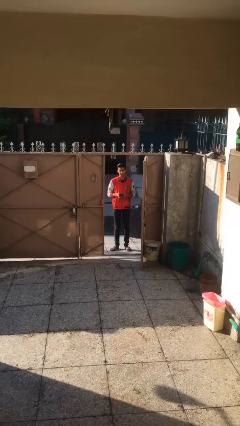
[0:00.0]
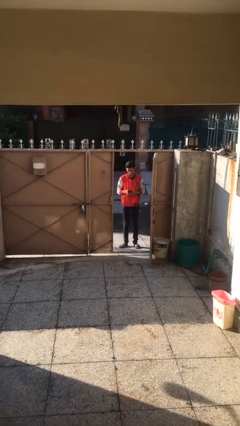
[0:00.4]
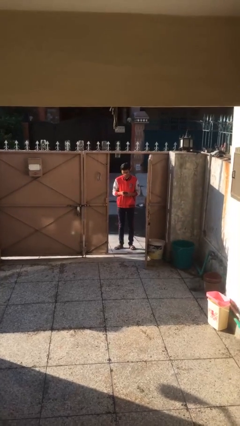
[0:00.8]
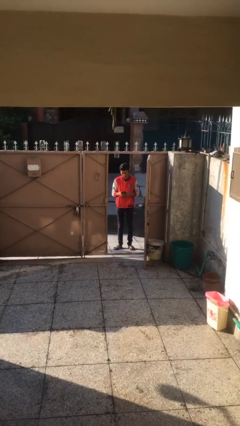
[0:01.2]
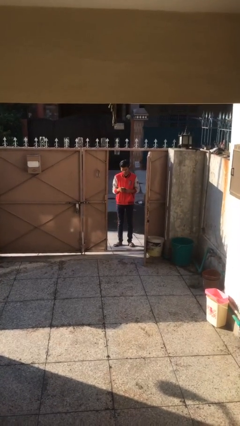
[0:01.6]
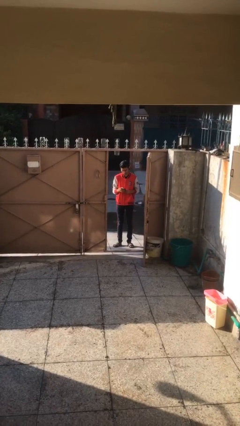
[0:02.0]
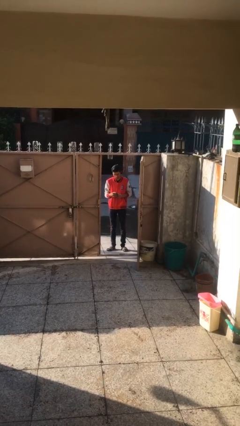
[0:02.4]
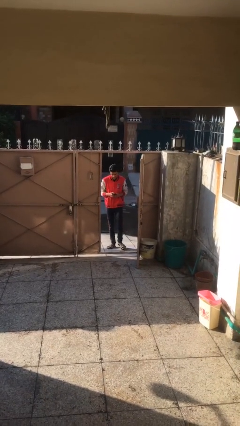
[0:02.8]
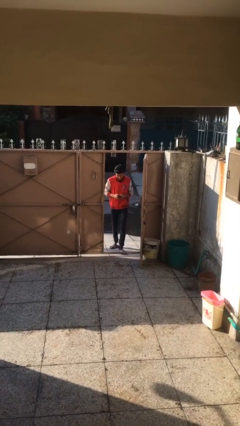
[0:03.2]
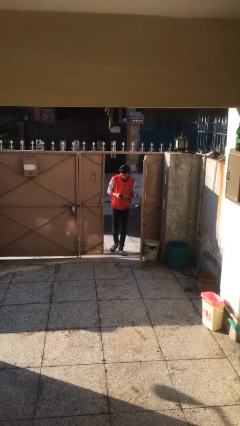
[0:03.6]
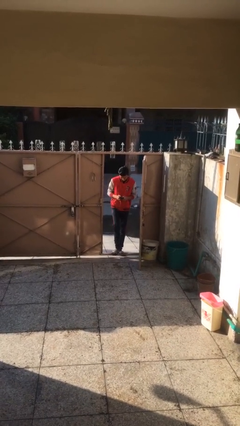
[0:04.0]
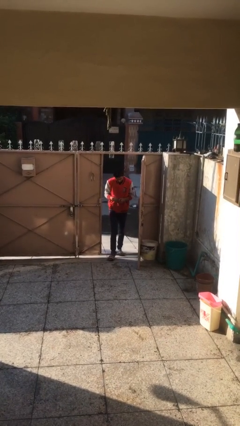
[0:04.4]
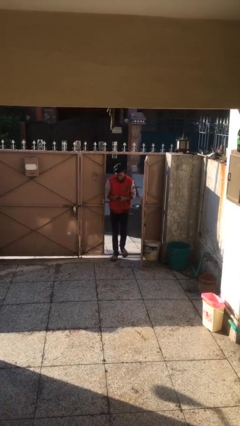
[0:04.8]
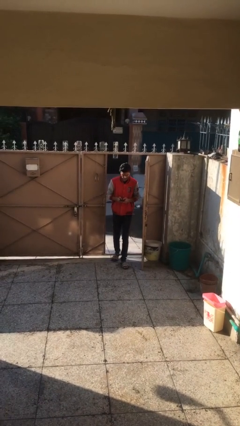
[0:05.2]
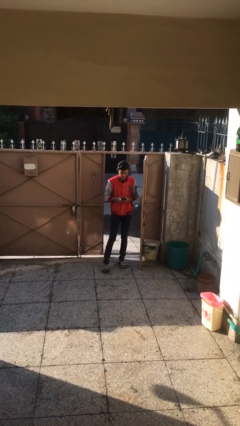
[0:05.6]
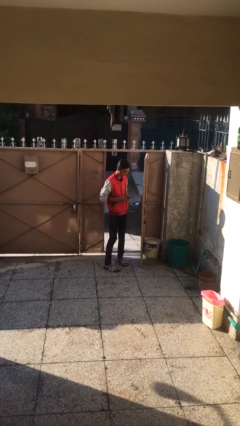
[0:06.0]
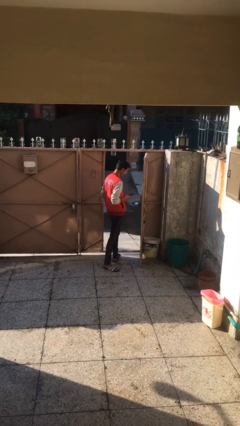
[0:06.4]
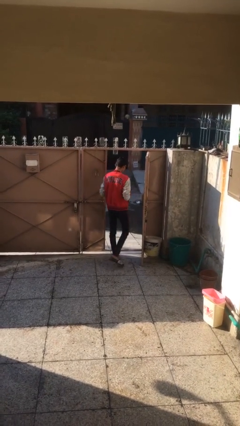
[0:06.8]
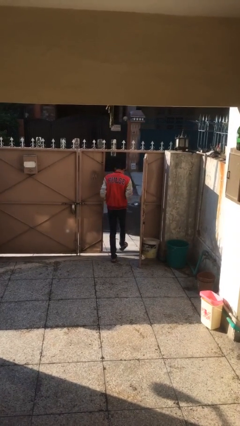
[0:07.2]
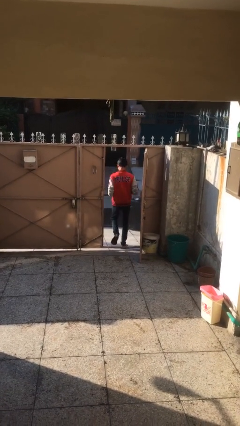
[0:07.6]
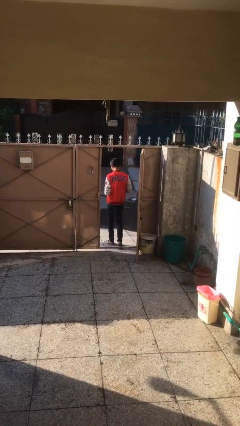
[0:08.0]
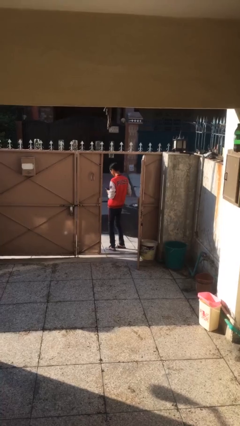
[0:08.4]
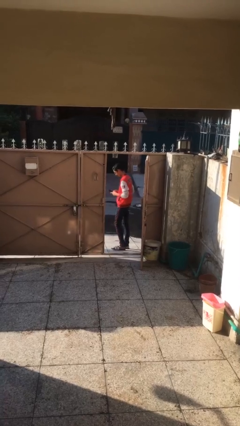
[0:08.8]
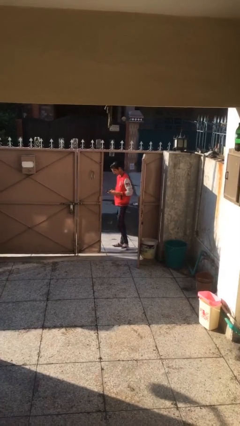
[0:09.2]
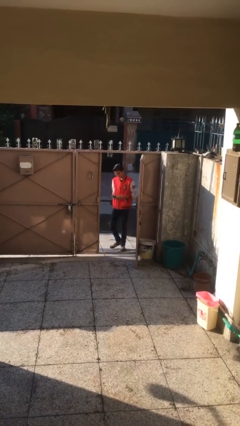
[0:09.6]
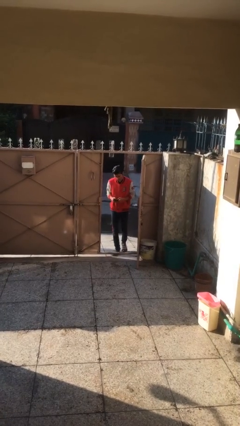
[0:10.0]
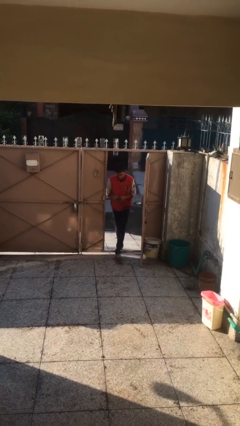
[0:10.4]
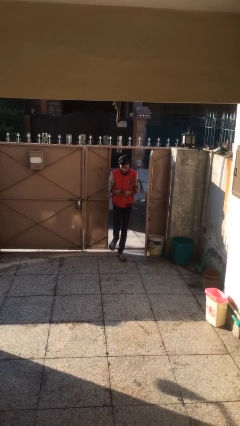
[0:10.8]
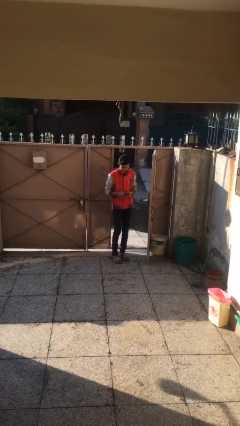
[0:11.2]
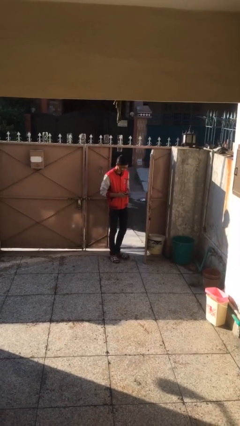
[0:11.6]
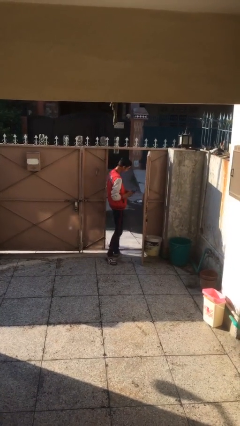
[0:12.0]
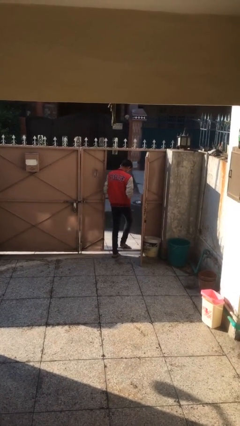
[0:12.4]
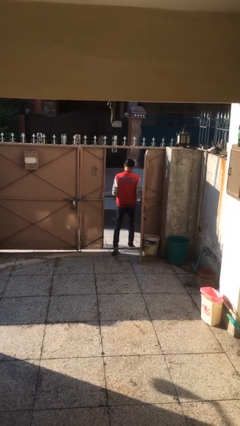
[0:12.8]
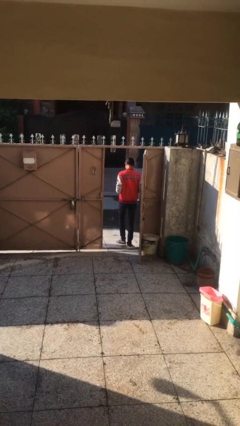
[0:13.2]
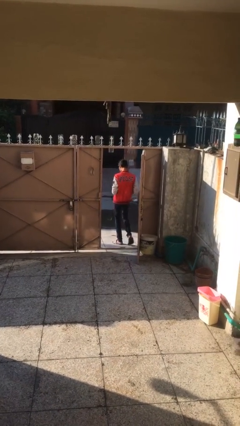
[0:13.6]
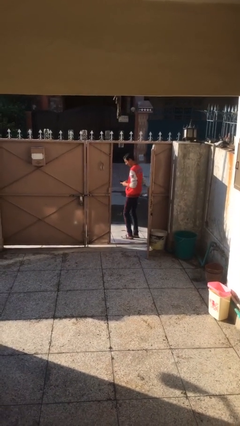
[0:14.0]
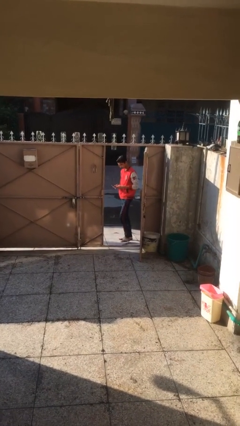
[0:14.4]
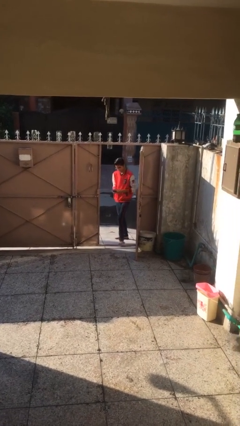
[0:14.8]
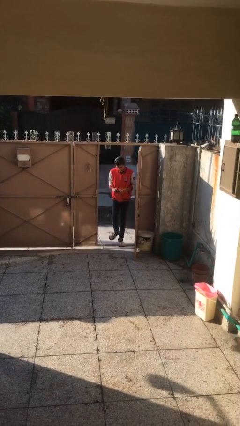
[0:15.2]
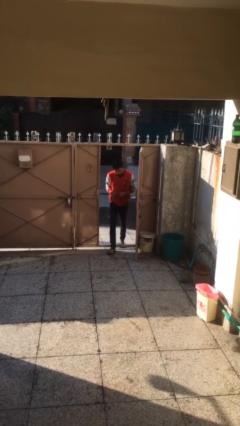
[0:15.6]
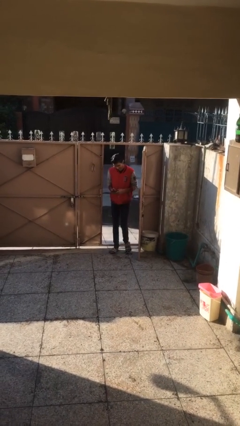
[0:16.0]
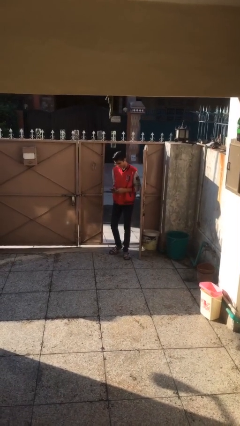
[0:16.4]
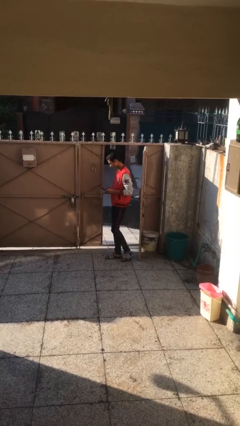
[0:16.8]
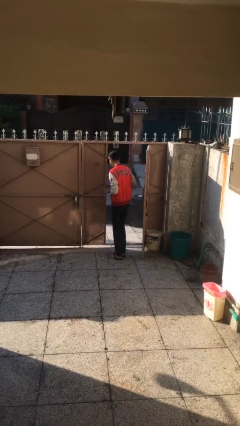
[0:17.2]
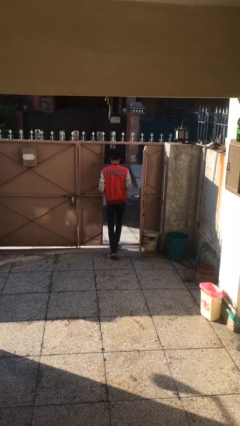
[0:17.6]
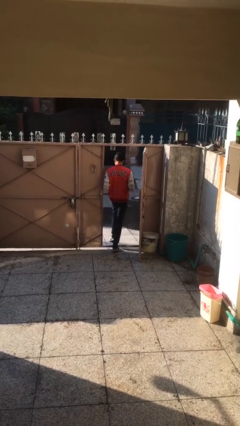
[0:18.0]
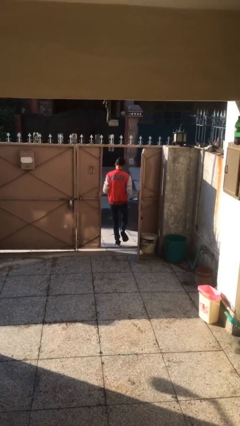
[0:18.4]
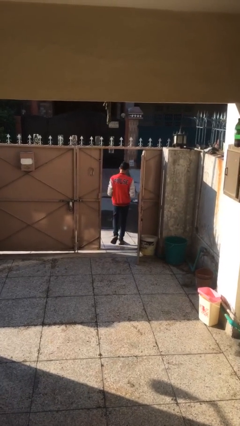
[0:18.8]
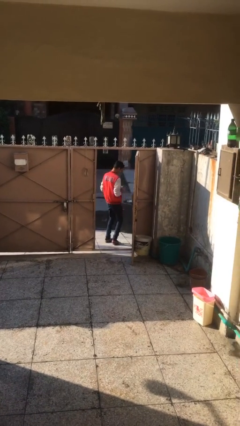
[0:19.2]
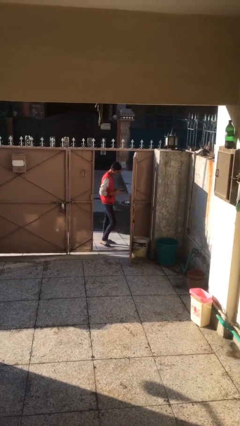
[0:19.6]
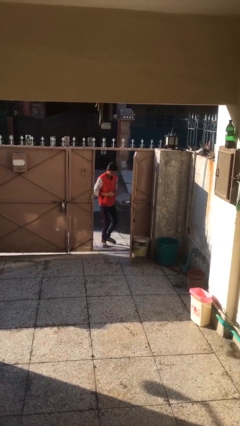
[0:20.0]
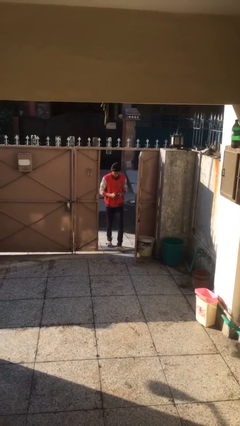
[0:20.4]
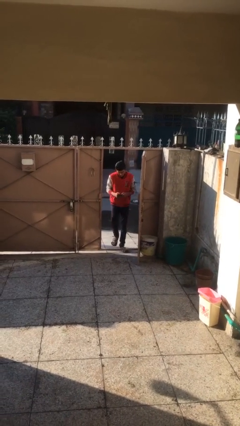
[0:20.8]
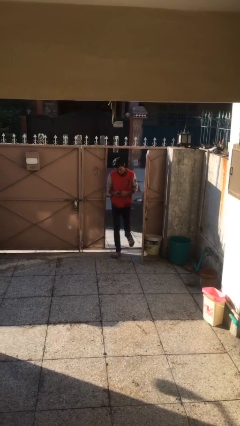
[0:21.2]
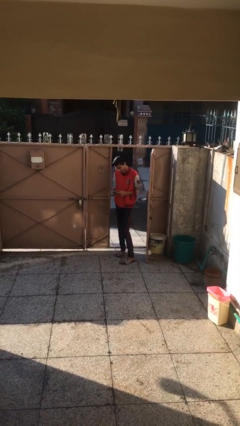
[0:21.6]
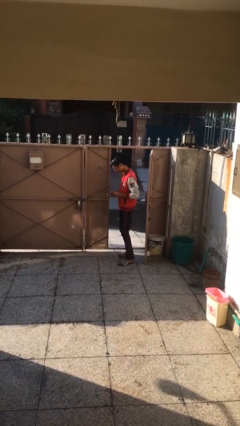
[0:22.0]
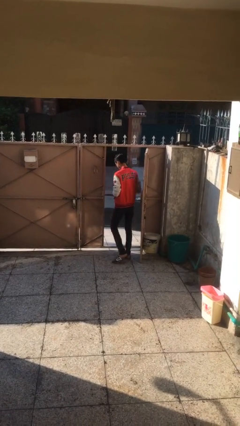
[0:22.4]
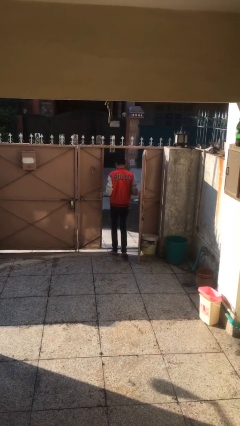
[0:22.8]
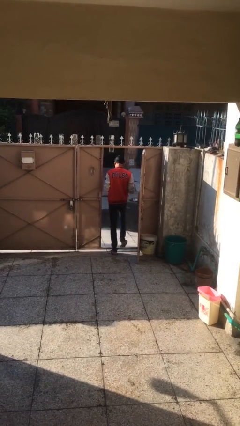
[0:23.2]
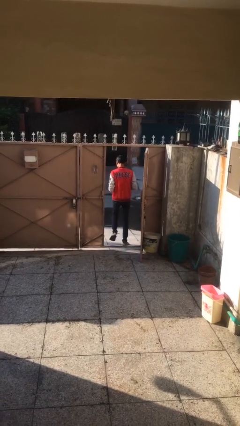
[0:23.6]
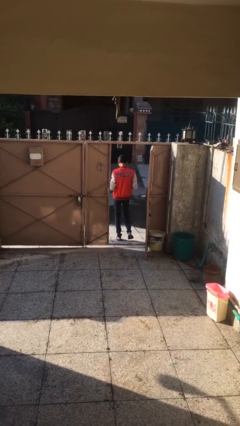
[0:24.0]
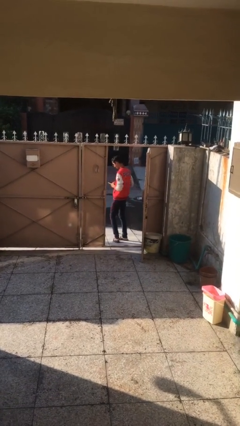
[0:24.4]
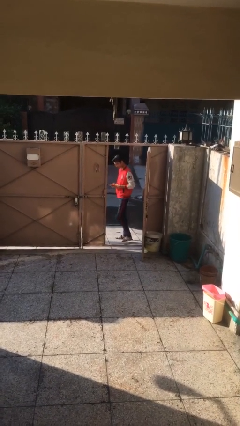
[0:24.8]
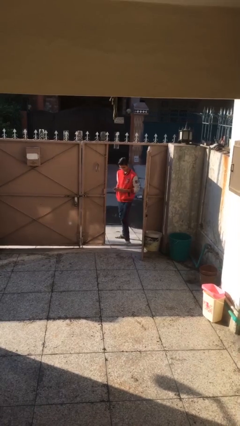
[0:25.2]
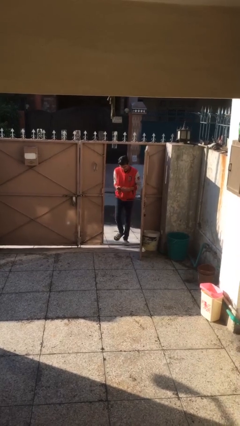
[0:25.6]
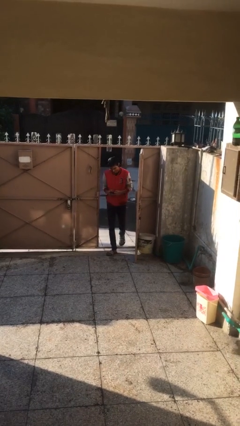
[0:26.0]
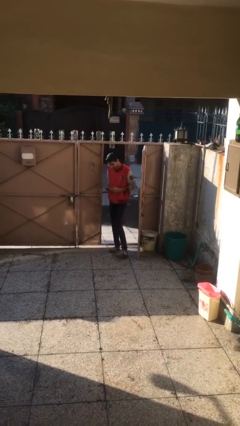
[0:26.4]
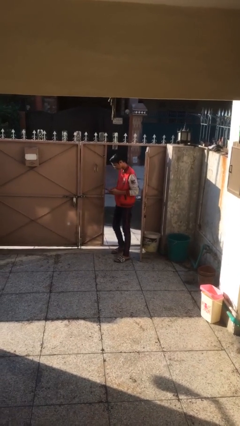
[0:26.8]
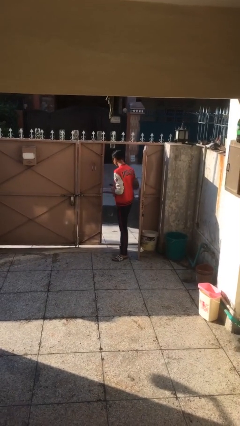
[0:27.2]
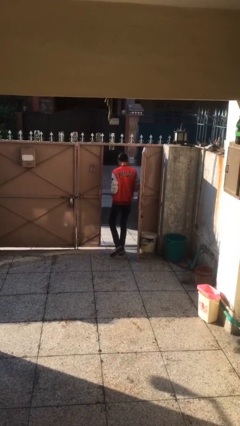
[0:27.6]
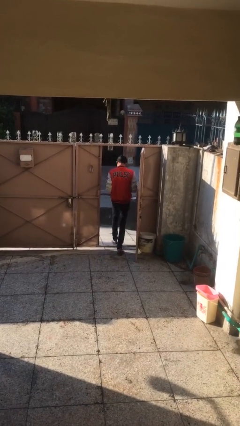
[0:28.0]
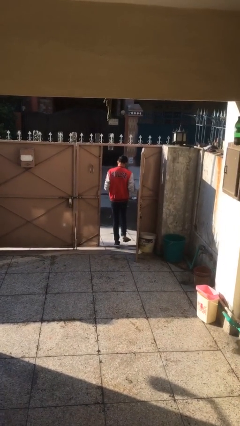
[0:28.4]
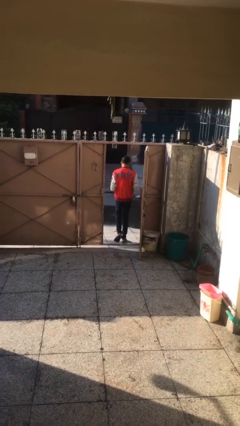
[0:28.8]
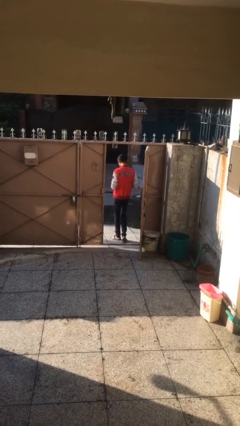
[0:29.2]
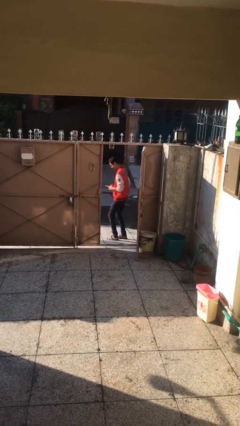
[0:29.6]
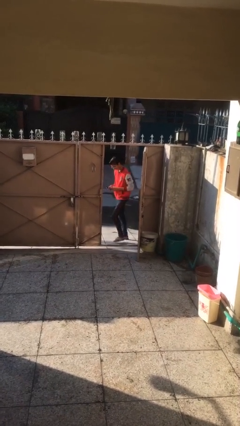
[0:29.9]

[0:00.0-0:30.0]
person texts on phone

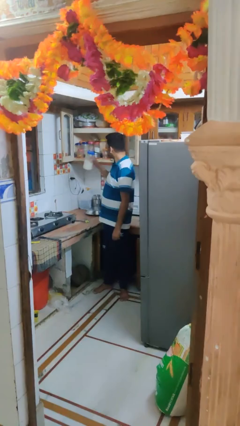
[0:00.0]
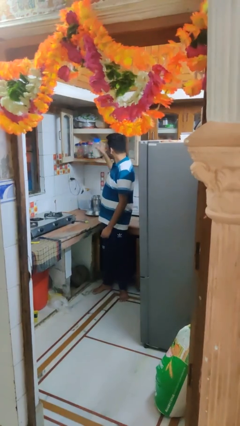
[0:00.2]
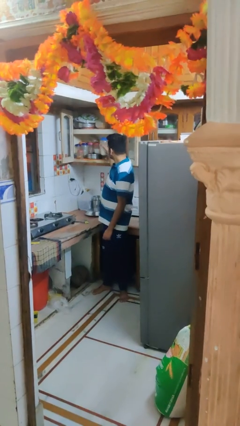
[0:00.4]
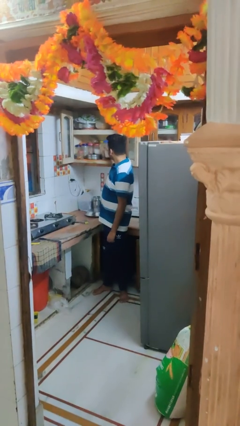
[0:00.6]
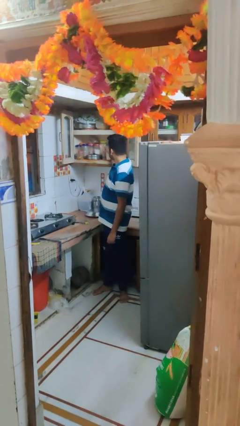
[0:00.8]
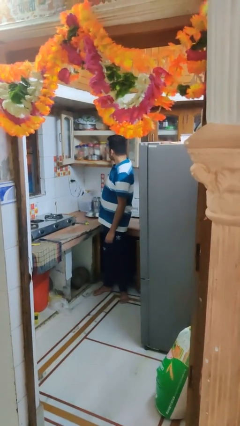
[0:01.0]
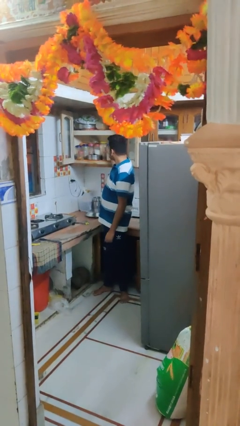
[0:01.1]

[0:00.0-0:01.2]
person puts object in cabinet

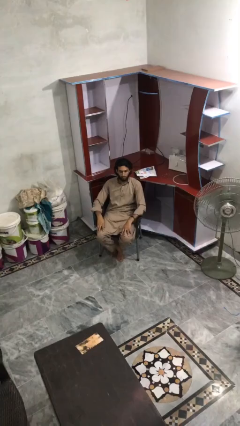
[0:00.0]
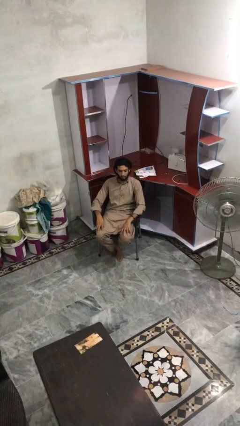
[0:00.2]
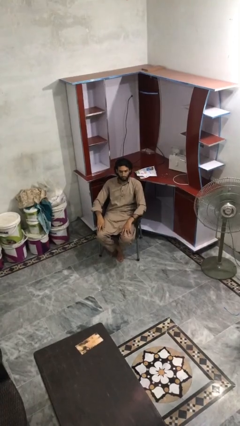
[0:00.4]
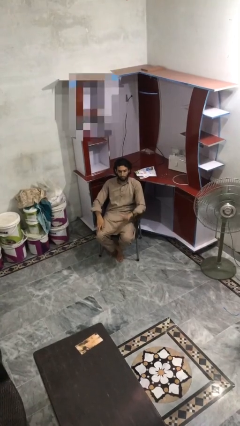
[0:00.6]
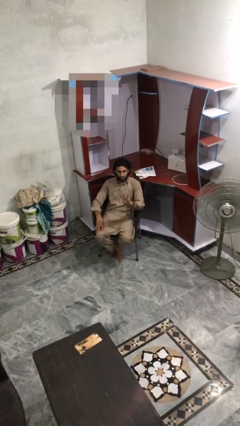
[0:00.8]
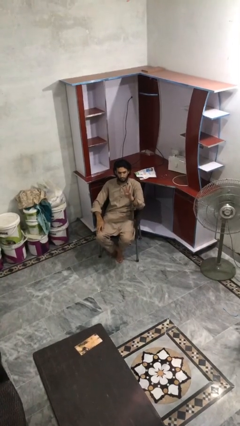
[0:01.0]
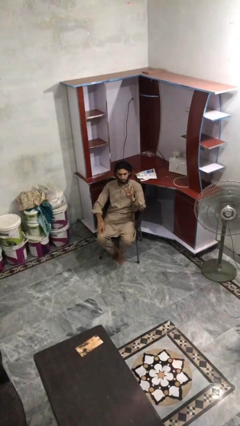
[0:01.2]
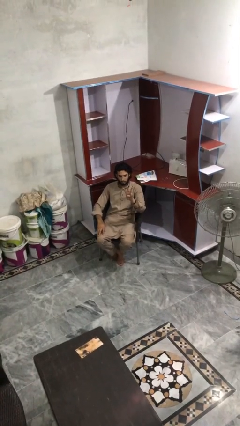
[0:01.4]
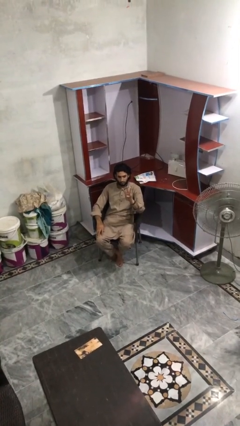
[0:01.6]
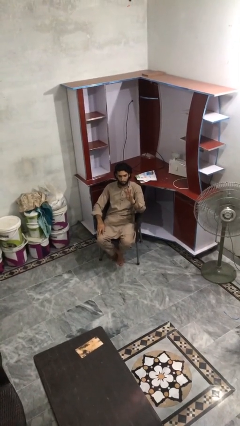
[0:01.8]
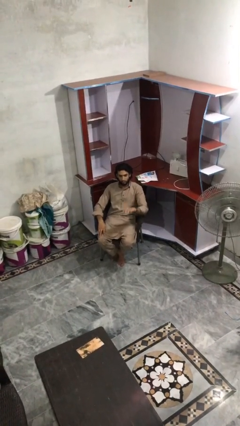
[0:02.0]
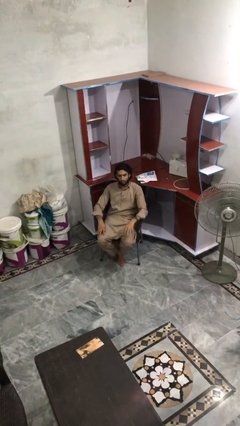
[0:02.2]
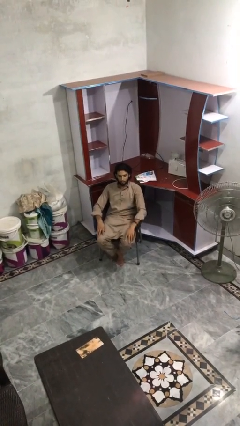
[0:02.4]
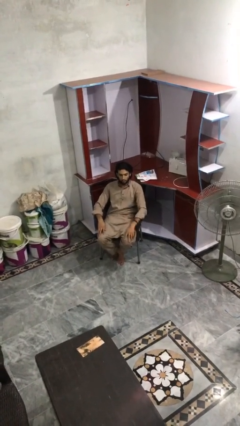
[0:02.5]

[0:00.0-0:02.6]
person gestures number three
